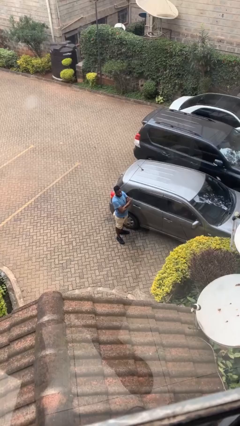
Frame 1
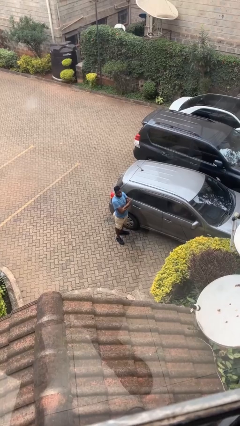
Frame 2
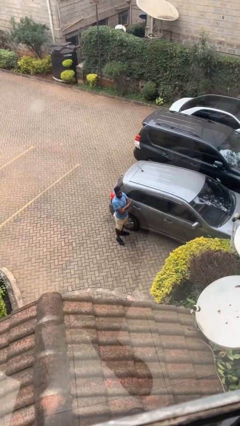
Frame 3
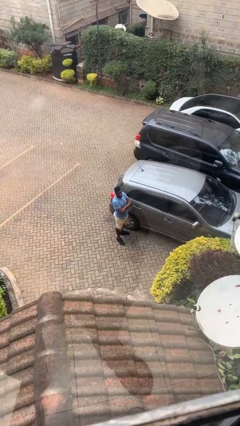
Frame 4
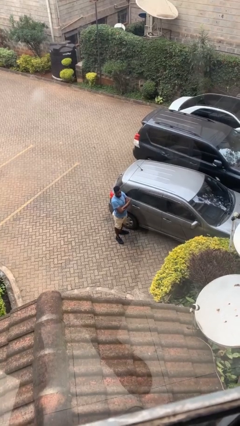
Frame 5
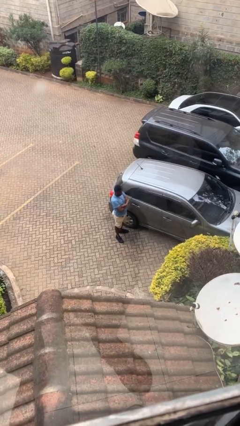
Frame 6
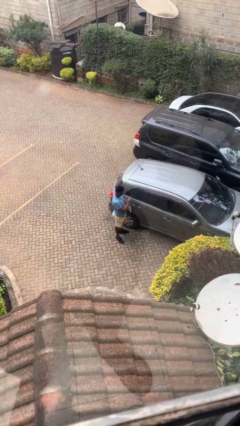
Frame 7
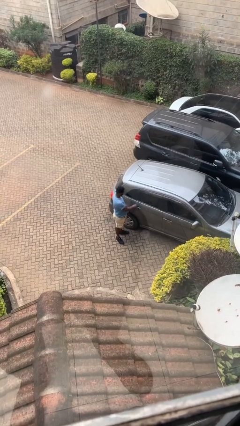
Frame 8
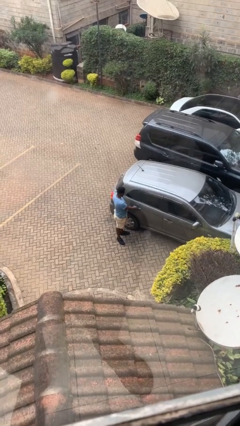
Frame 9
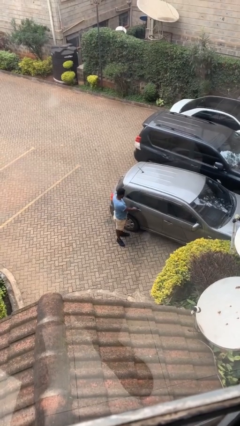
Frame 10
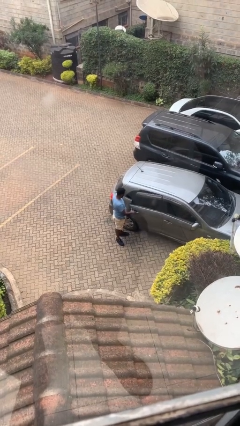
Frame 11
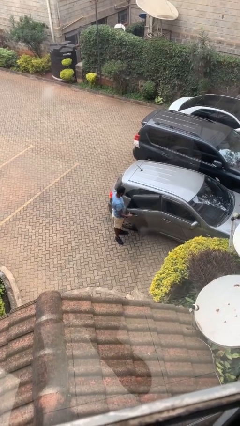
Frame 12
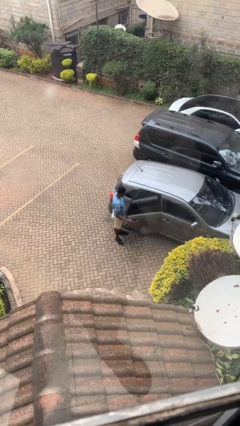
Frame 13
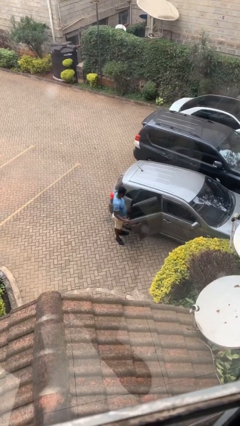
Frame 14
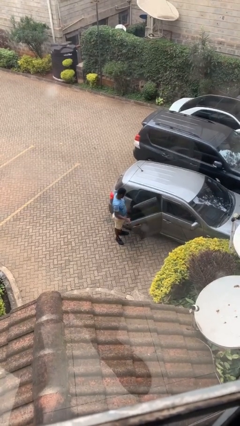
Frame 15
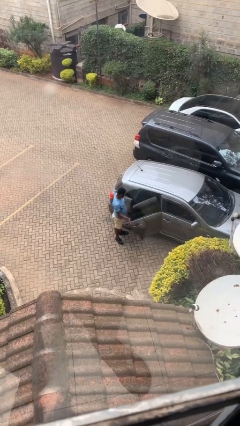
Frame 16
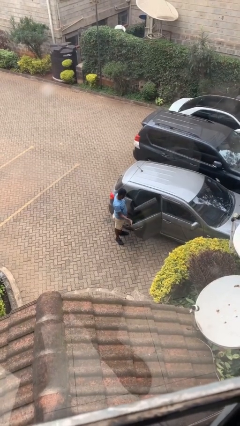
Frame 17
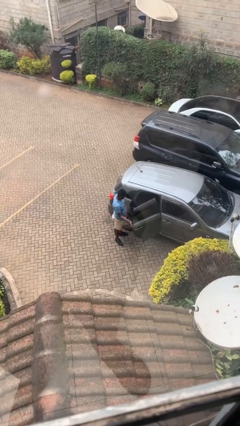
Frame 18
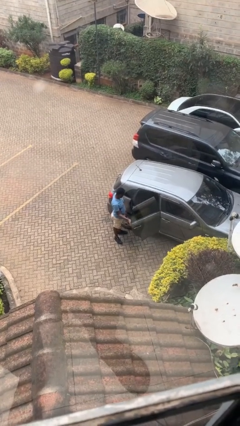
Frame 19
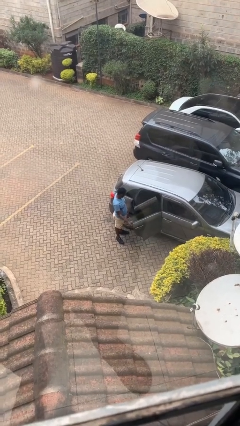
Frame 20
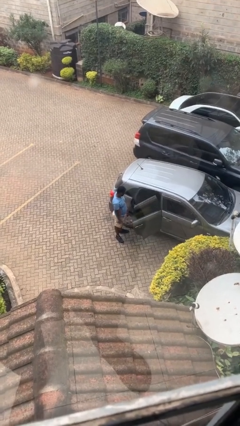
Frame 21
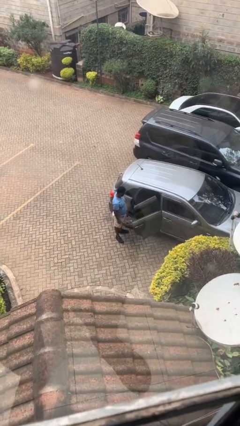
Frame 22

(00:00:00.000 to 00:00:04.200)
person opens car door

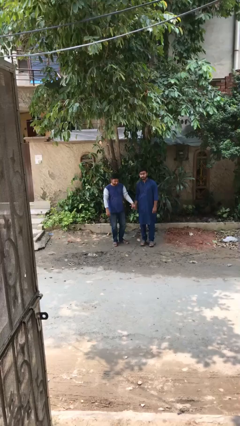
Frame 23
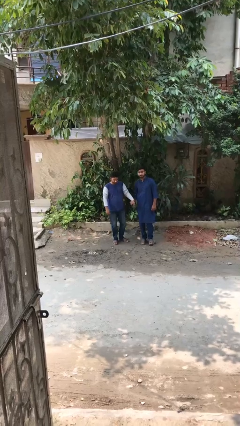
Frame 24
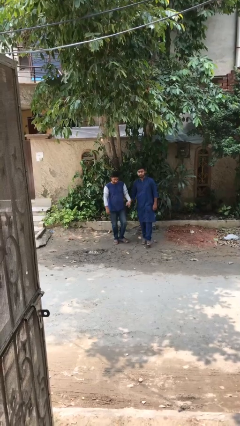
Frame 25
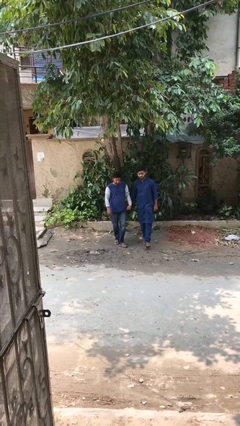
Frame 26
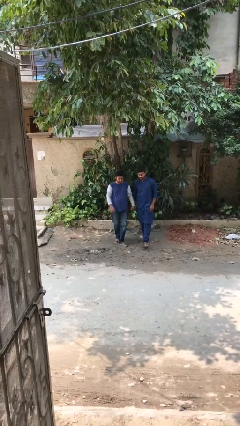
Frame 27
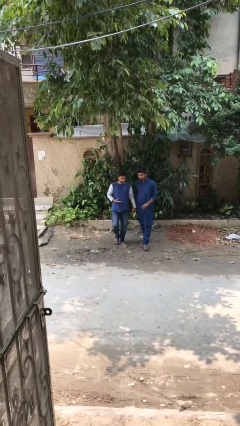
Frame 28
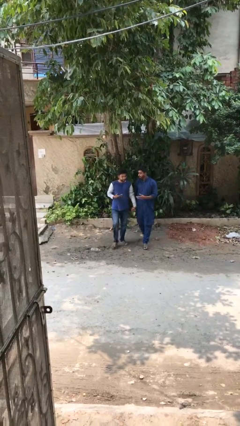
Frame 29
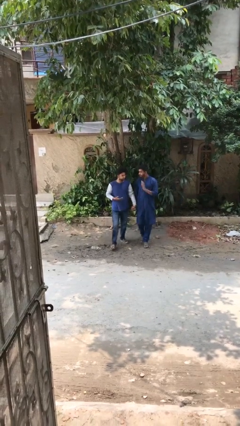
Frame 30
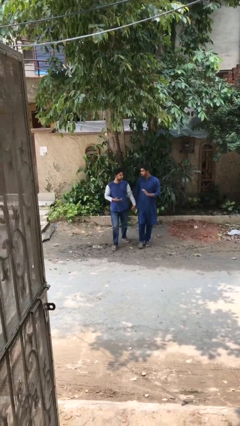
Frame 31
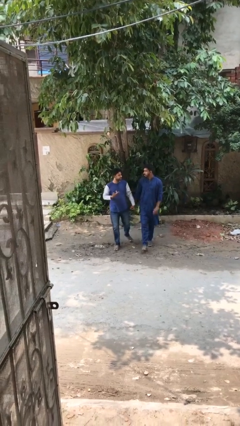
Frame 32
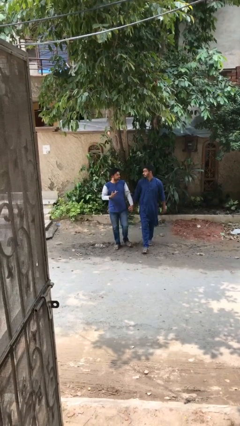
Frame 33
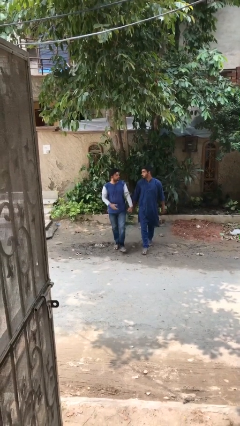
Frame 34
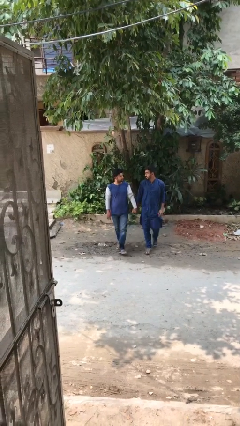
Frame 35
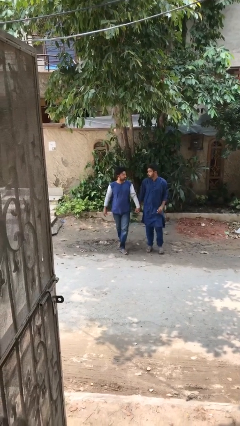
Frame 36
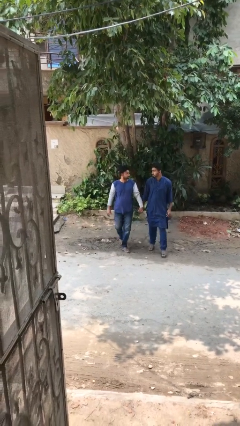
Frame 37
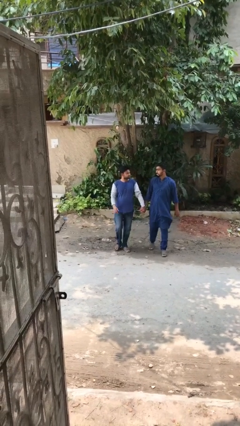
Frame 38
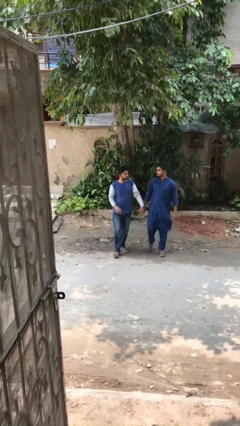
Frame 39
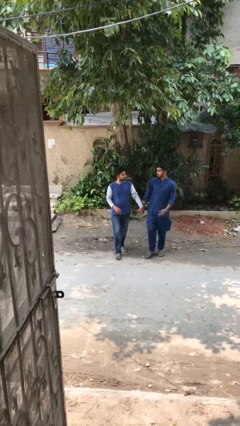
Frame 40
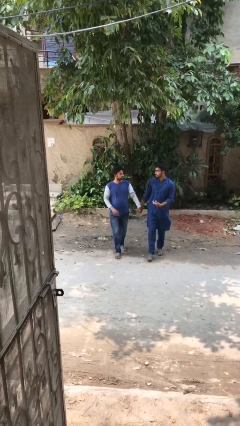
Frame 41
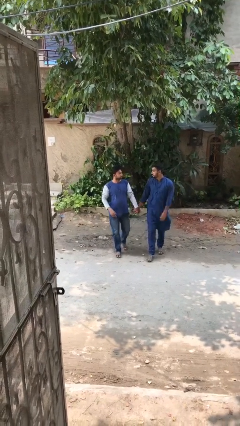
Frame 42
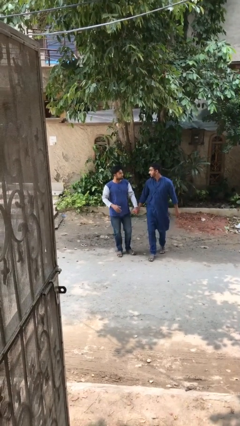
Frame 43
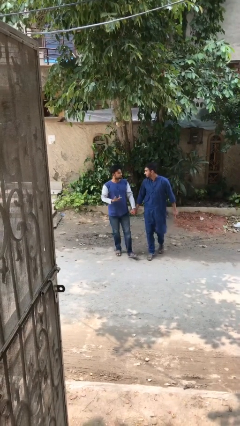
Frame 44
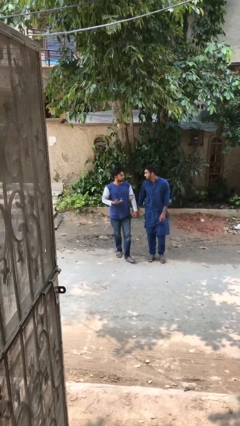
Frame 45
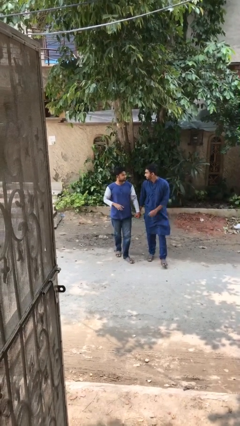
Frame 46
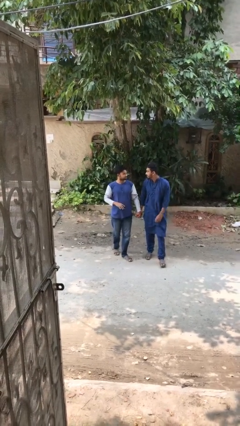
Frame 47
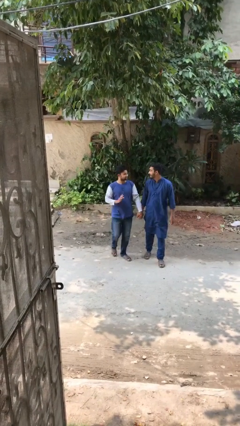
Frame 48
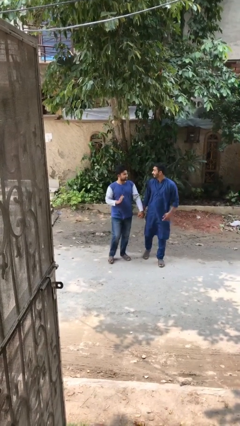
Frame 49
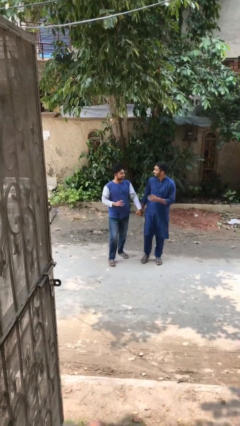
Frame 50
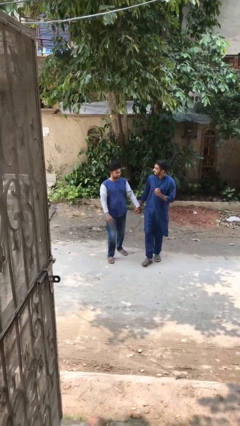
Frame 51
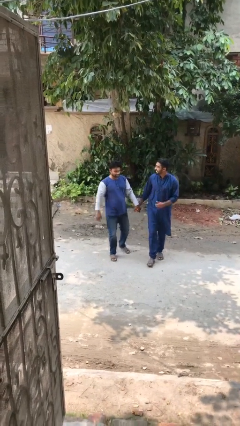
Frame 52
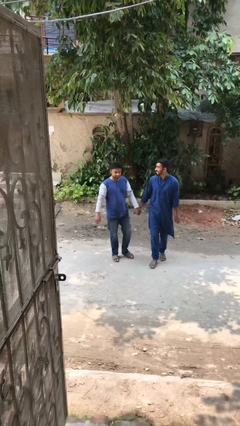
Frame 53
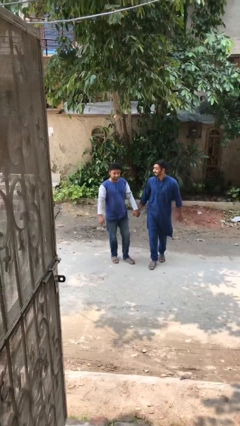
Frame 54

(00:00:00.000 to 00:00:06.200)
person holds hand

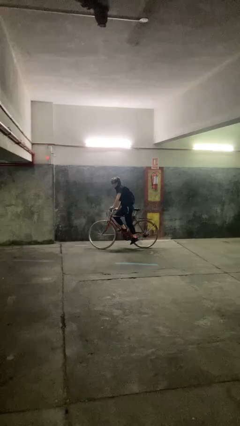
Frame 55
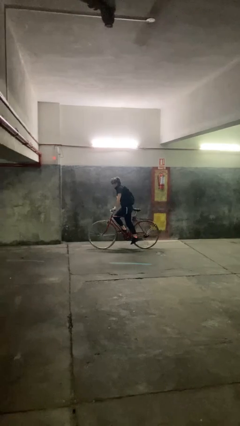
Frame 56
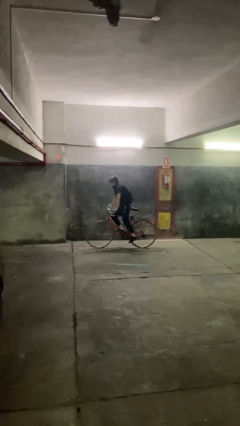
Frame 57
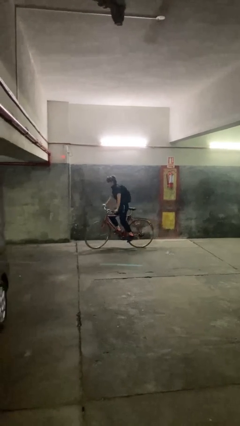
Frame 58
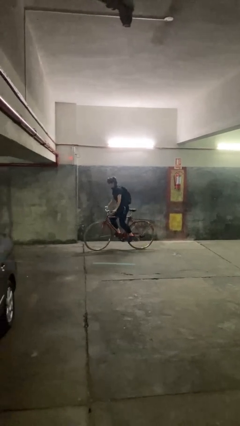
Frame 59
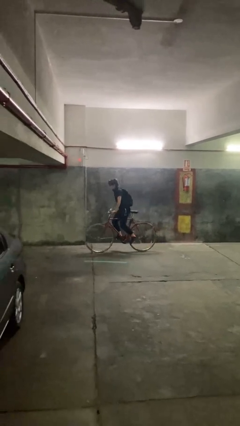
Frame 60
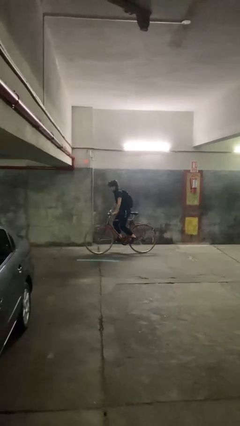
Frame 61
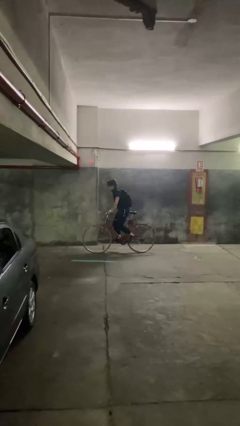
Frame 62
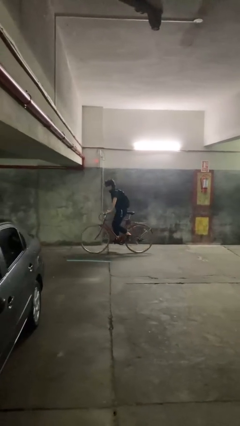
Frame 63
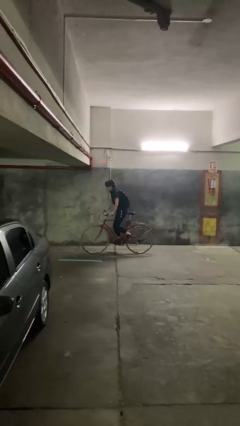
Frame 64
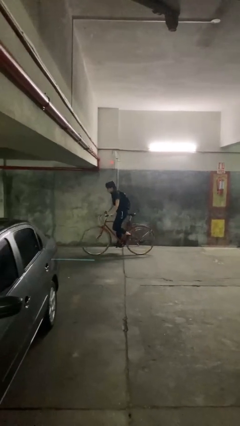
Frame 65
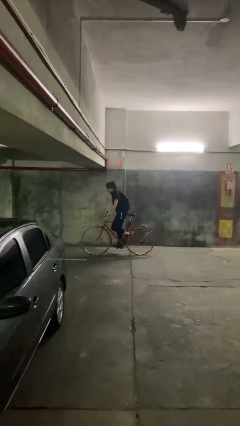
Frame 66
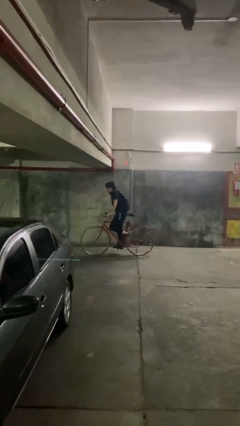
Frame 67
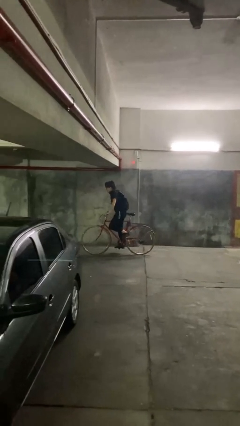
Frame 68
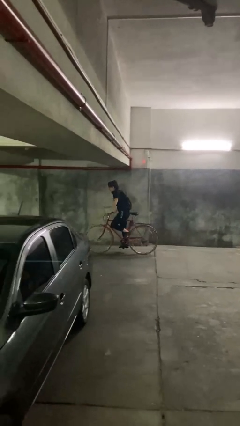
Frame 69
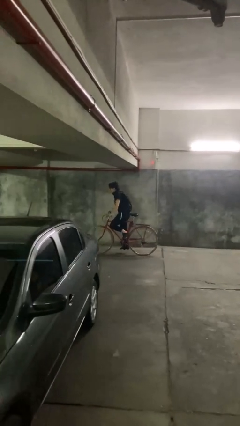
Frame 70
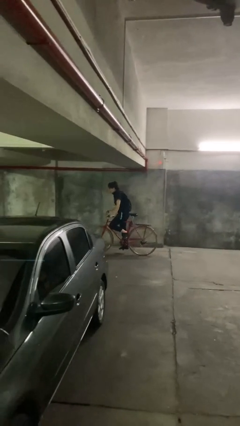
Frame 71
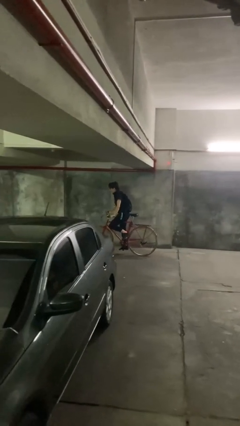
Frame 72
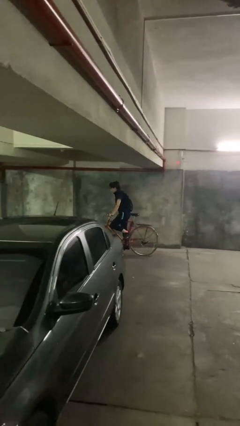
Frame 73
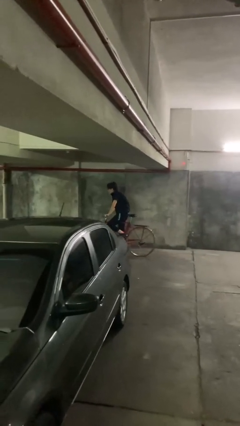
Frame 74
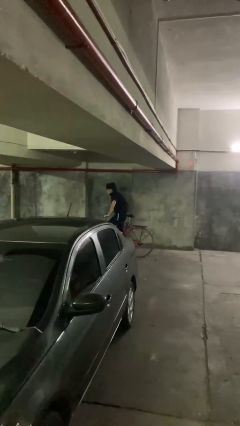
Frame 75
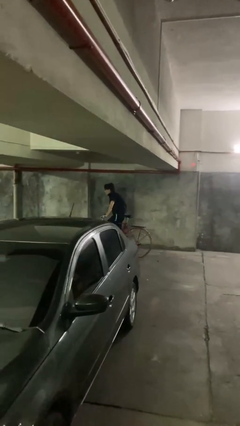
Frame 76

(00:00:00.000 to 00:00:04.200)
person rides bicycle

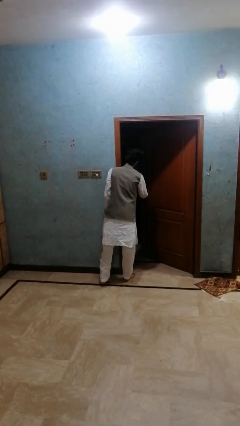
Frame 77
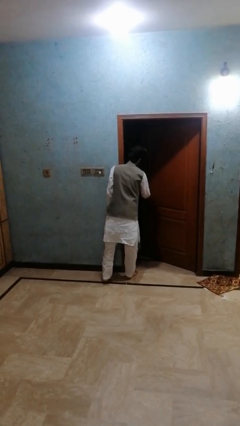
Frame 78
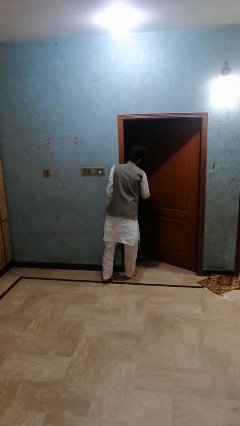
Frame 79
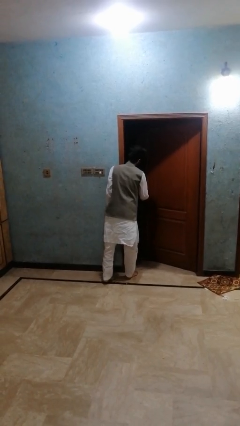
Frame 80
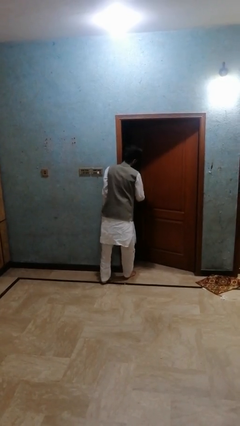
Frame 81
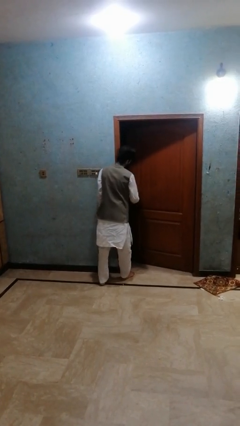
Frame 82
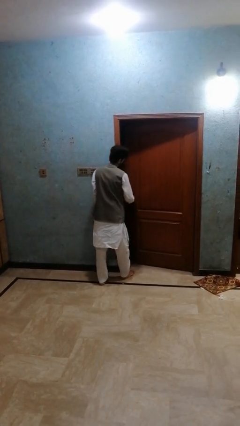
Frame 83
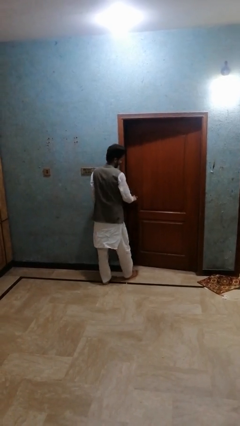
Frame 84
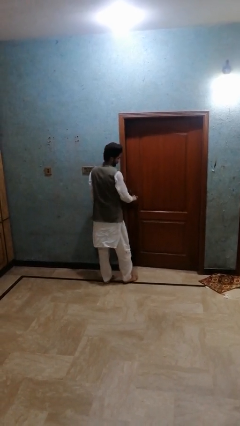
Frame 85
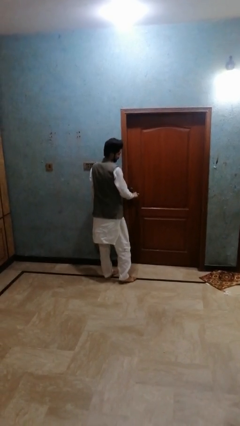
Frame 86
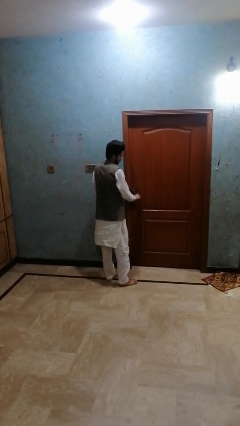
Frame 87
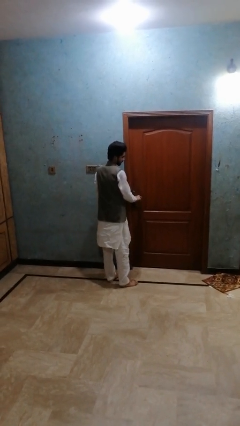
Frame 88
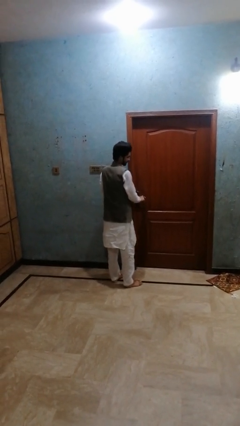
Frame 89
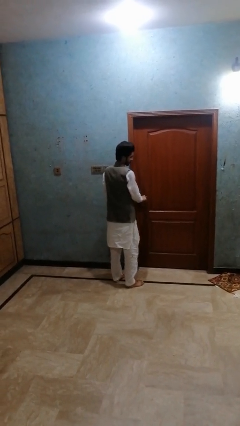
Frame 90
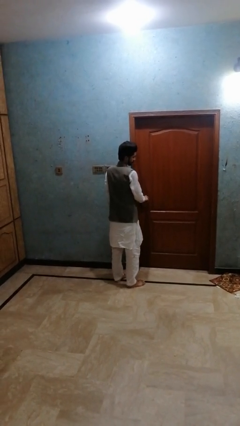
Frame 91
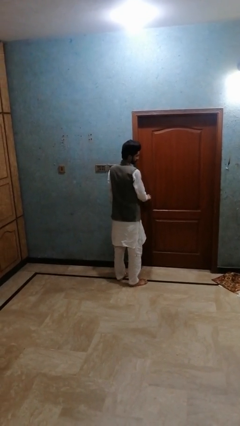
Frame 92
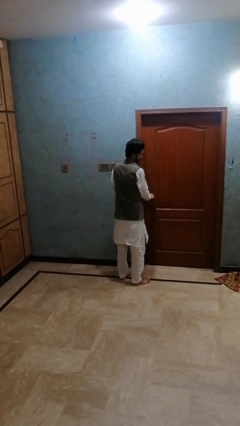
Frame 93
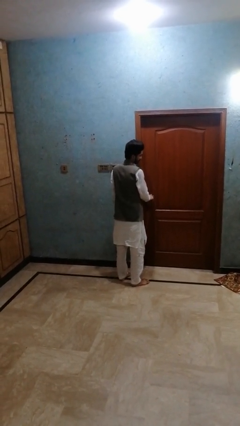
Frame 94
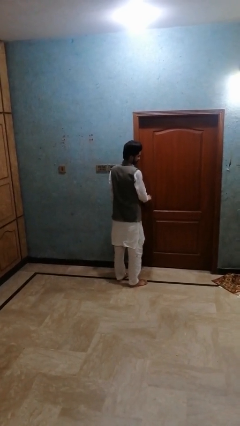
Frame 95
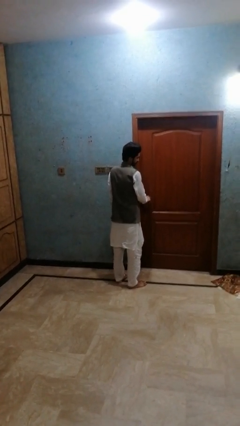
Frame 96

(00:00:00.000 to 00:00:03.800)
person closes closet door
